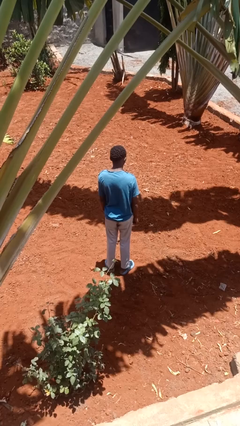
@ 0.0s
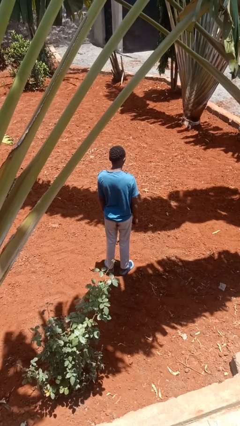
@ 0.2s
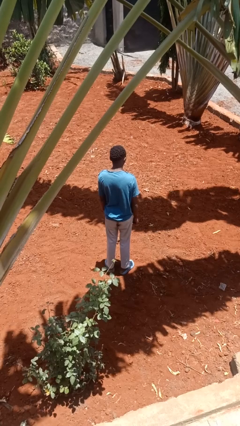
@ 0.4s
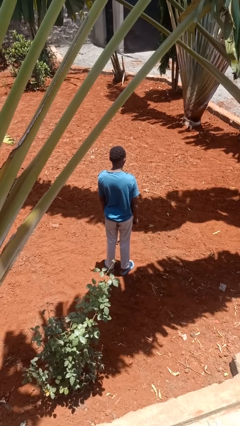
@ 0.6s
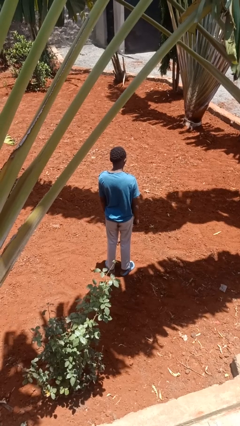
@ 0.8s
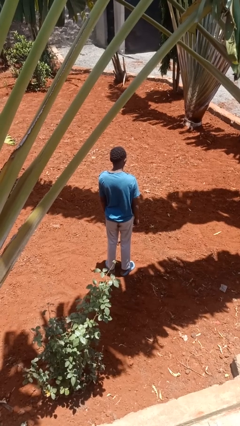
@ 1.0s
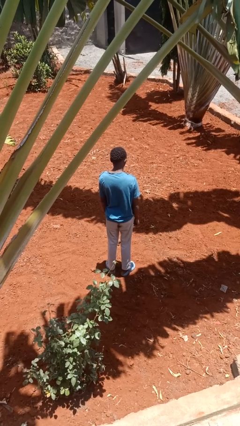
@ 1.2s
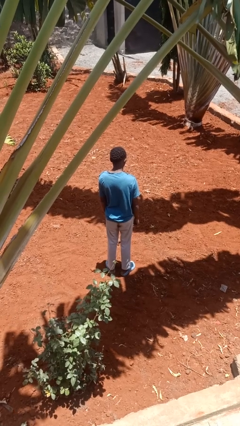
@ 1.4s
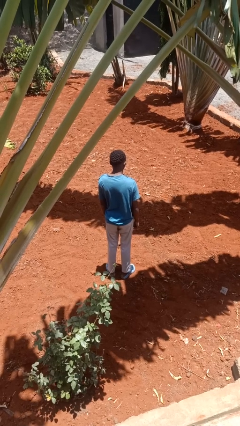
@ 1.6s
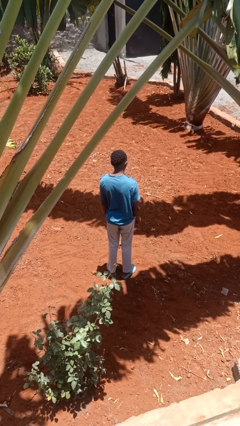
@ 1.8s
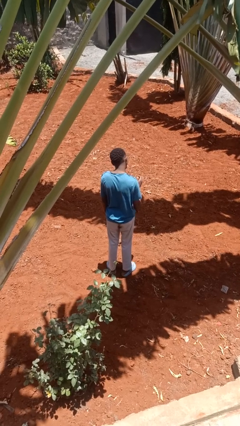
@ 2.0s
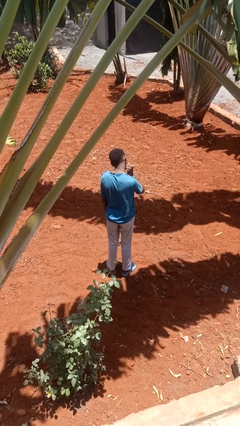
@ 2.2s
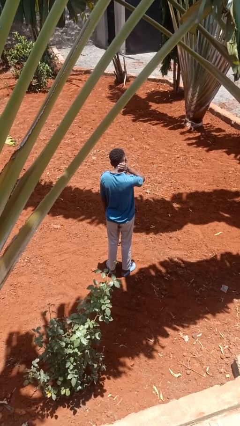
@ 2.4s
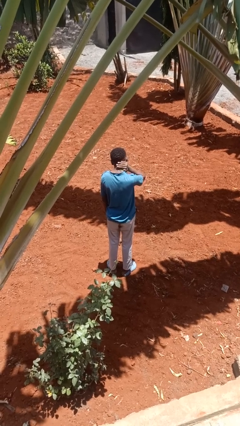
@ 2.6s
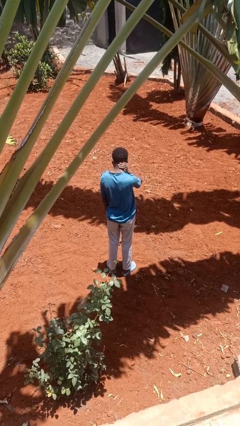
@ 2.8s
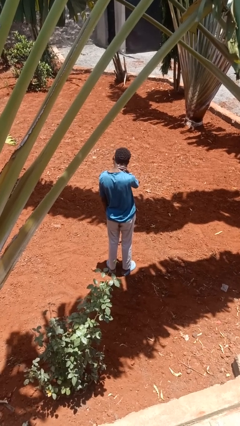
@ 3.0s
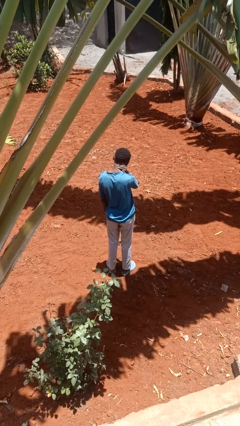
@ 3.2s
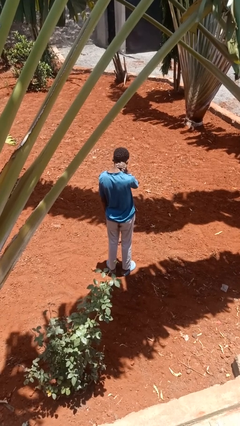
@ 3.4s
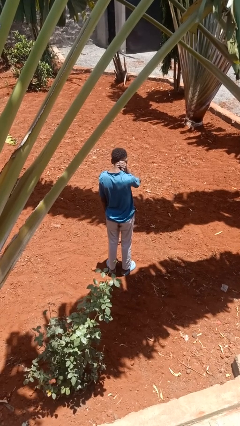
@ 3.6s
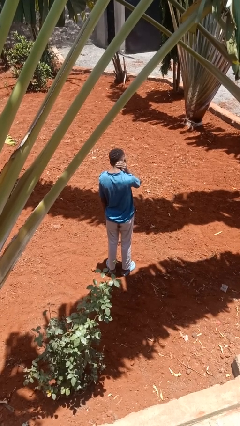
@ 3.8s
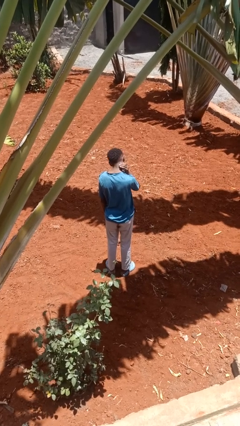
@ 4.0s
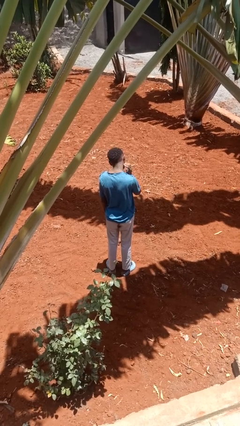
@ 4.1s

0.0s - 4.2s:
person rubs neck

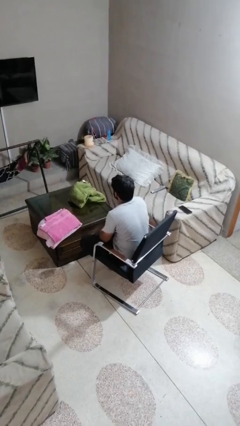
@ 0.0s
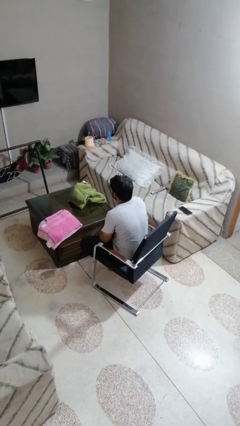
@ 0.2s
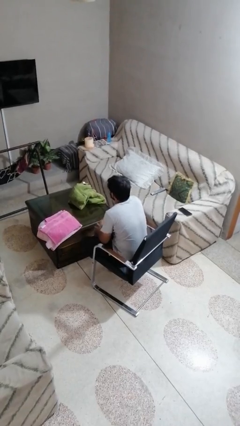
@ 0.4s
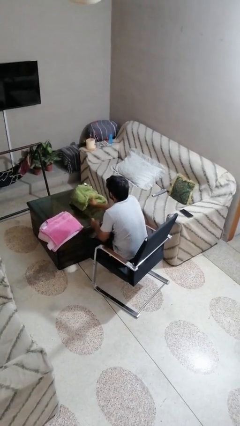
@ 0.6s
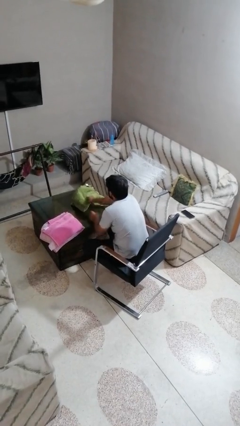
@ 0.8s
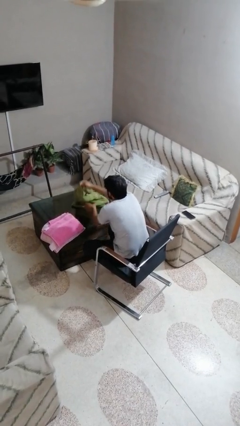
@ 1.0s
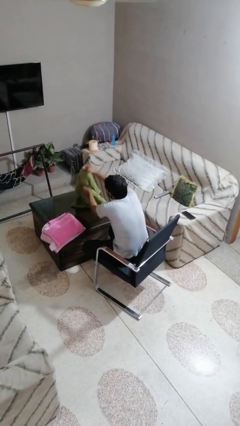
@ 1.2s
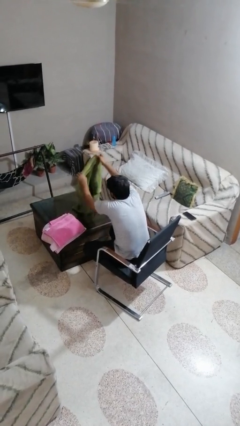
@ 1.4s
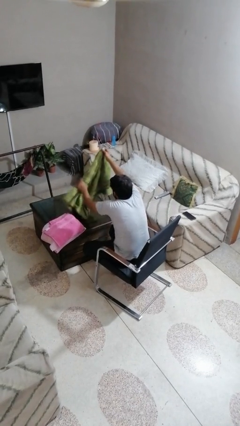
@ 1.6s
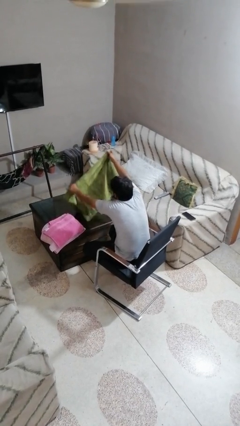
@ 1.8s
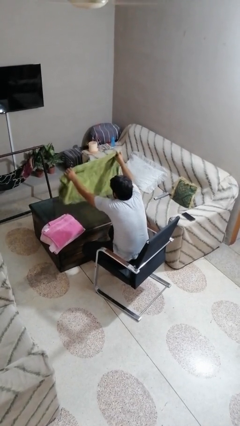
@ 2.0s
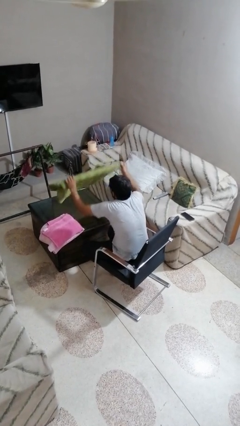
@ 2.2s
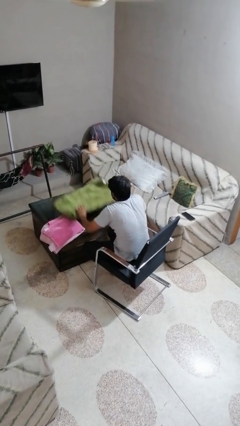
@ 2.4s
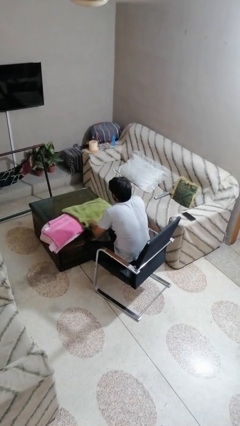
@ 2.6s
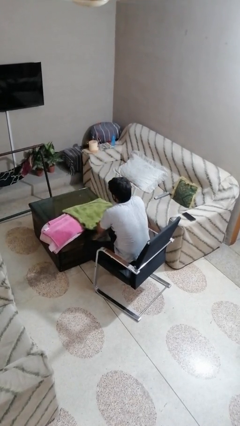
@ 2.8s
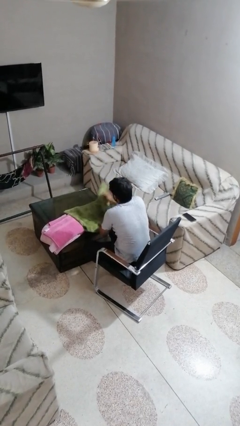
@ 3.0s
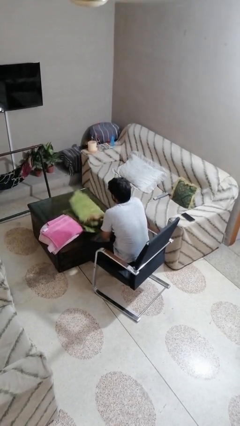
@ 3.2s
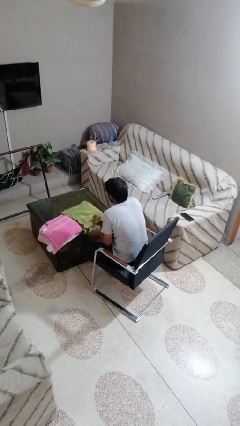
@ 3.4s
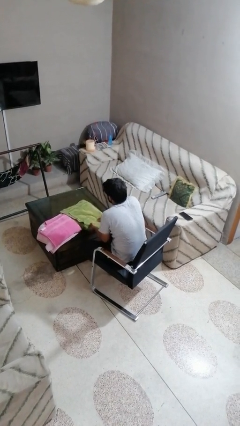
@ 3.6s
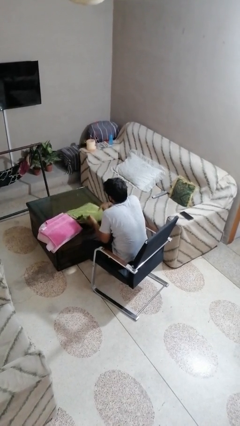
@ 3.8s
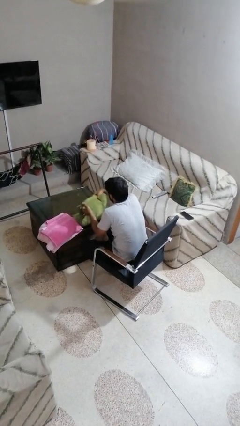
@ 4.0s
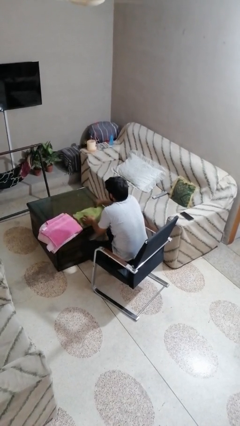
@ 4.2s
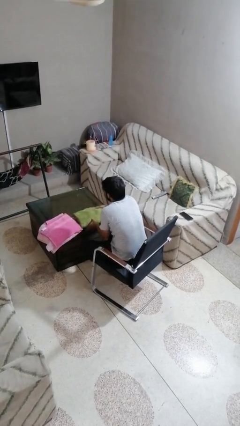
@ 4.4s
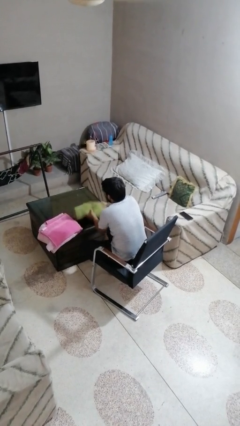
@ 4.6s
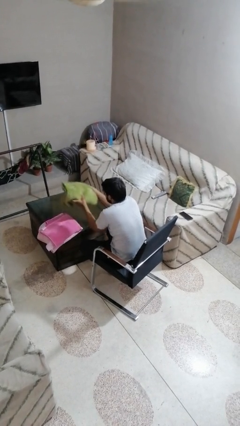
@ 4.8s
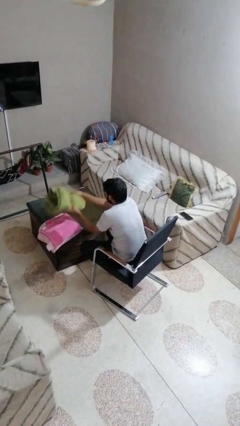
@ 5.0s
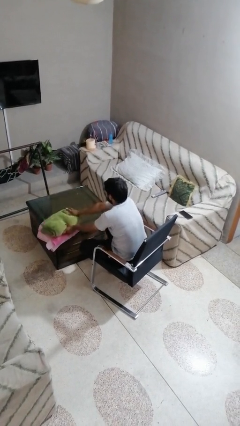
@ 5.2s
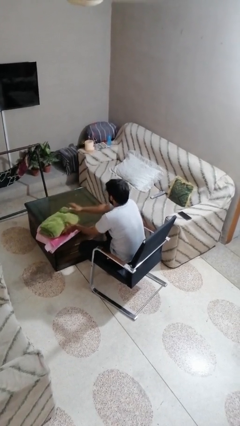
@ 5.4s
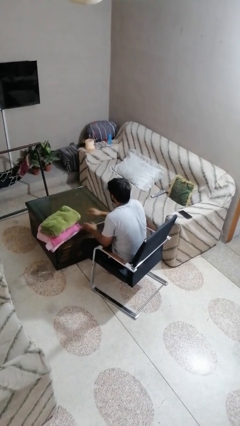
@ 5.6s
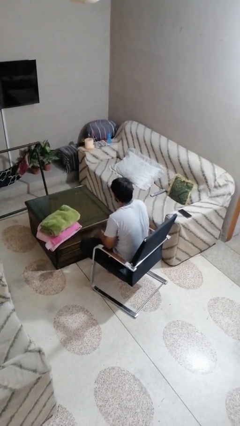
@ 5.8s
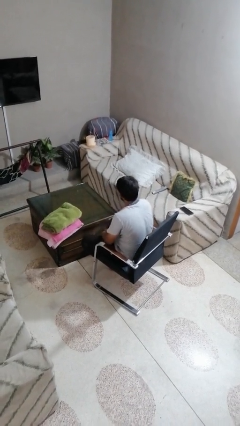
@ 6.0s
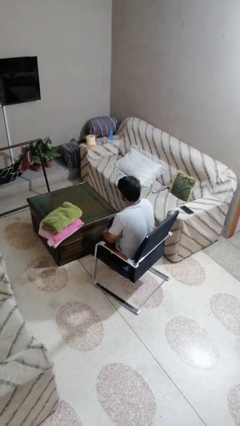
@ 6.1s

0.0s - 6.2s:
person folds towel

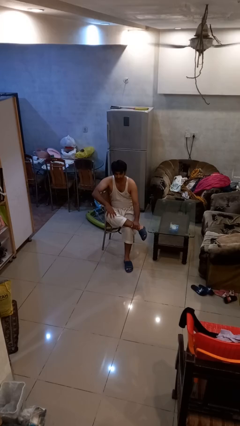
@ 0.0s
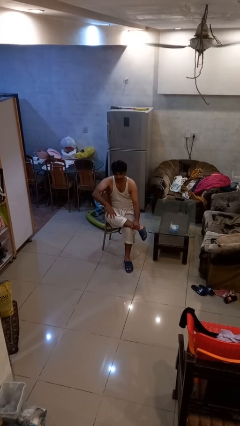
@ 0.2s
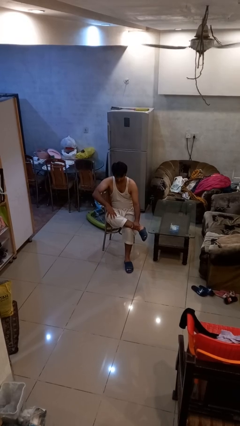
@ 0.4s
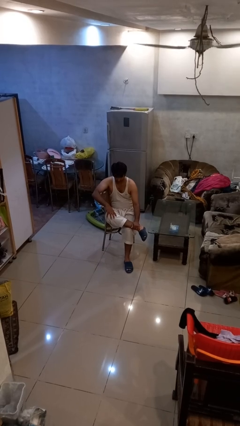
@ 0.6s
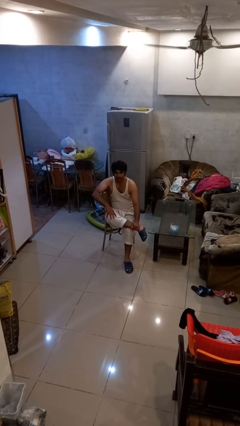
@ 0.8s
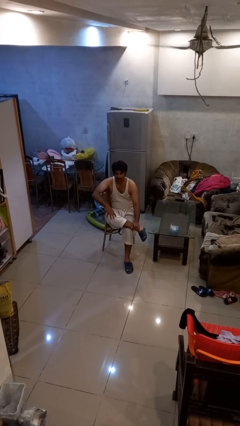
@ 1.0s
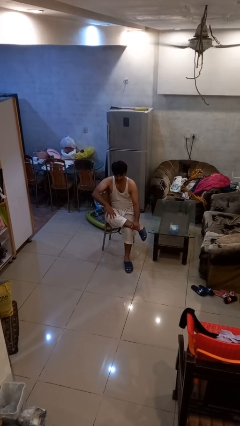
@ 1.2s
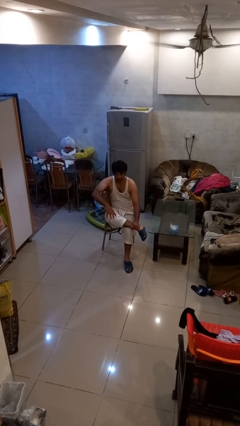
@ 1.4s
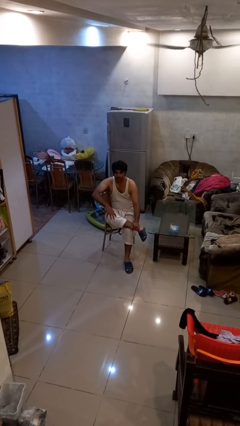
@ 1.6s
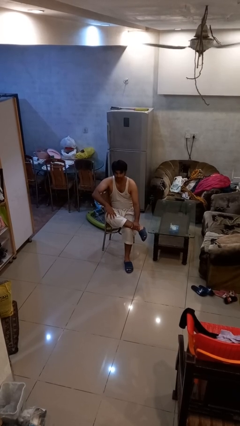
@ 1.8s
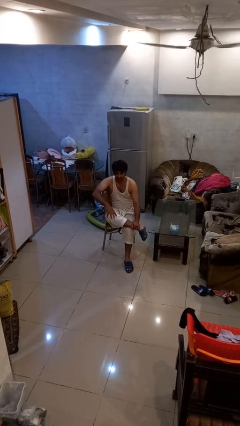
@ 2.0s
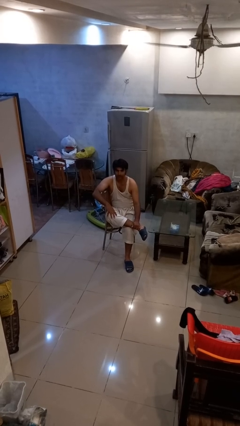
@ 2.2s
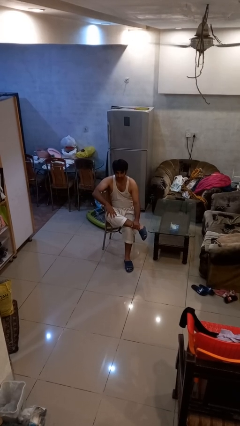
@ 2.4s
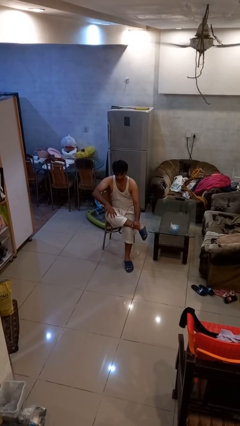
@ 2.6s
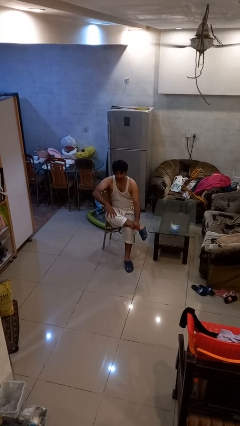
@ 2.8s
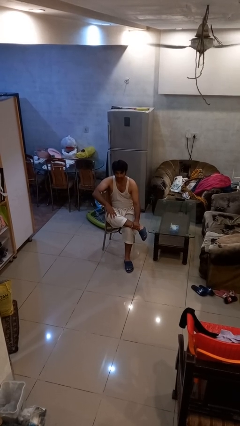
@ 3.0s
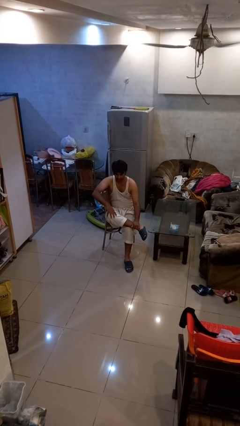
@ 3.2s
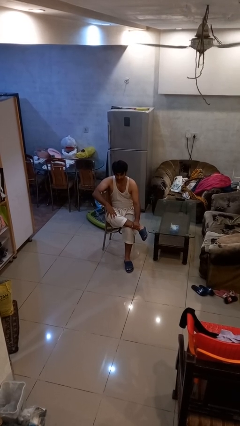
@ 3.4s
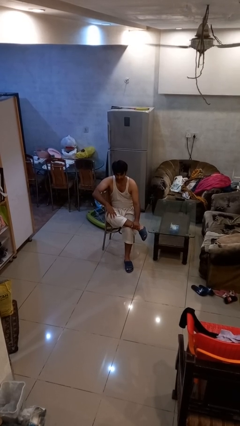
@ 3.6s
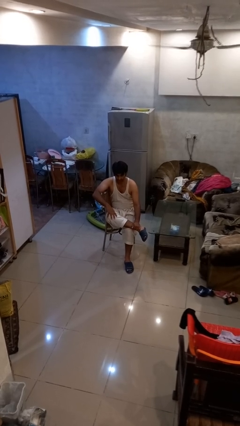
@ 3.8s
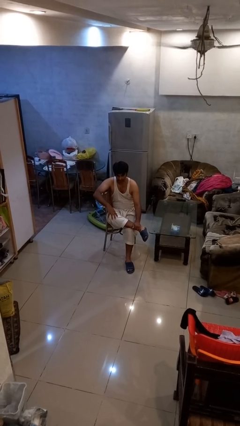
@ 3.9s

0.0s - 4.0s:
person nods head

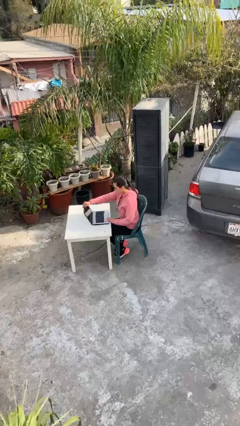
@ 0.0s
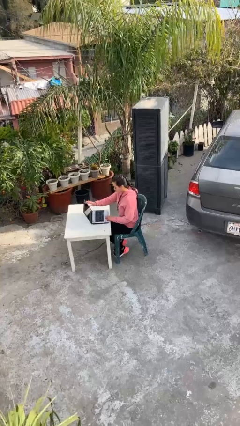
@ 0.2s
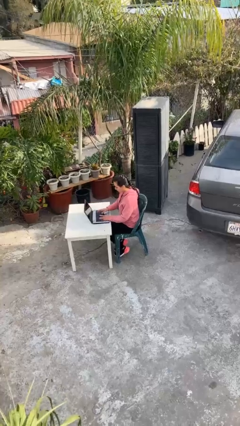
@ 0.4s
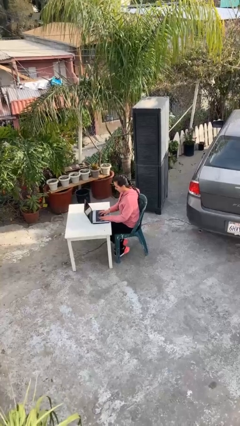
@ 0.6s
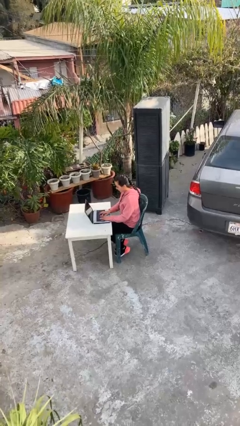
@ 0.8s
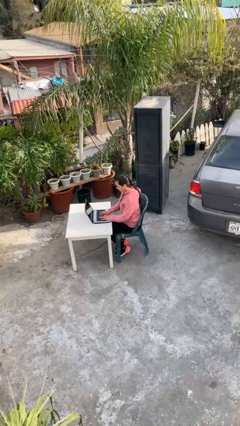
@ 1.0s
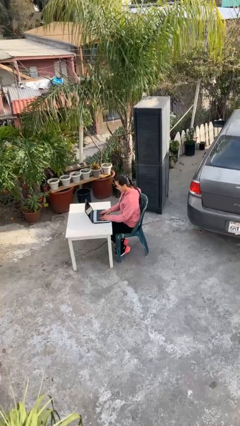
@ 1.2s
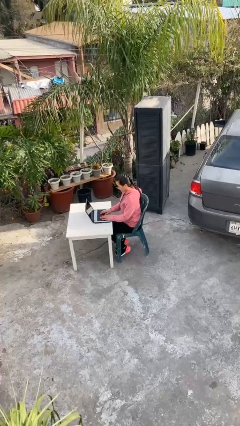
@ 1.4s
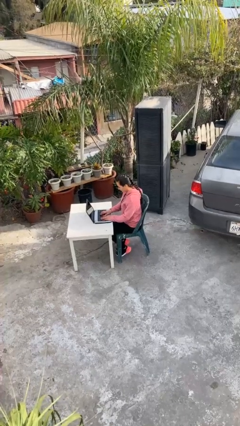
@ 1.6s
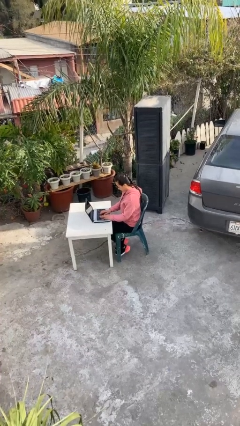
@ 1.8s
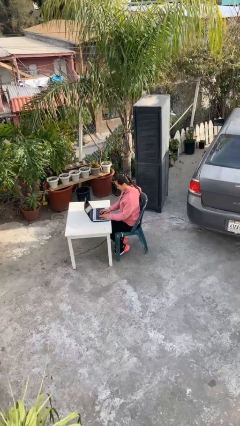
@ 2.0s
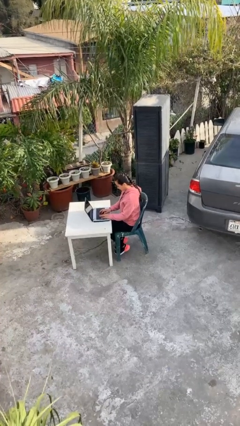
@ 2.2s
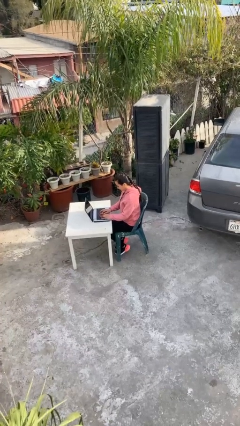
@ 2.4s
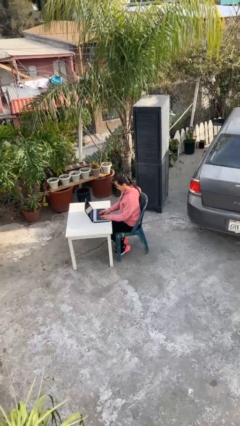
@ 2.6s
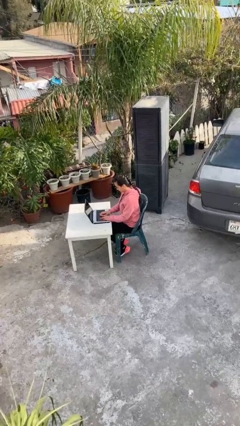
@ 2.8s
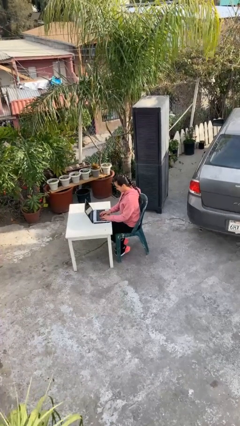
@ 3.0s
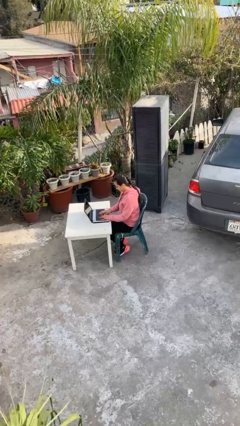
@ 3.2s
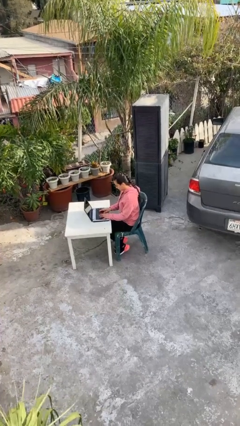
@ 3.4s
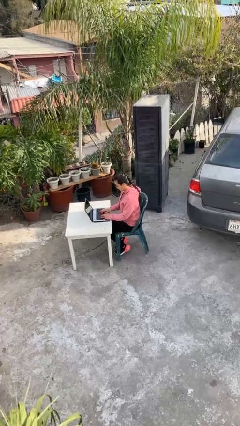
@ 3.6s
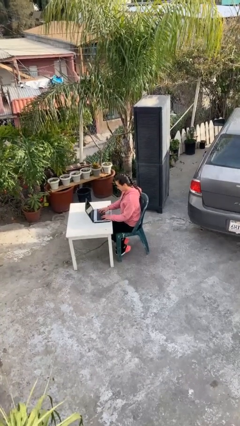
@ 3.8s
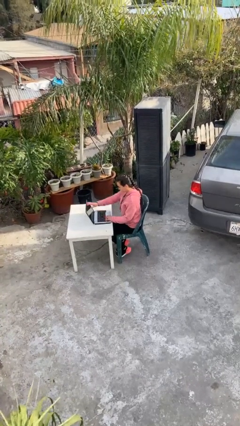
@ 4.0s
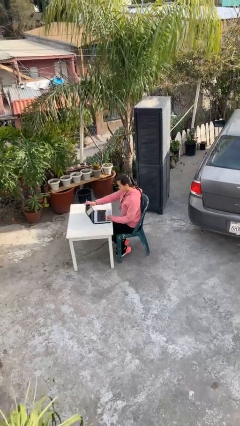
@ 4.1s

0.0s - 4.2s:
person interacts with laptop
